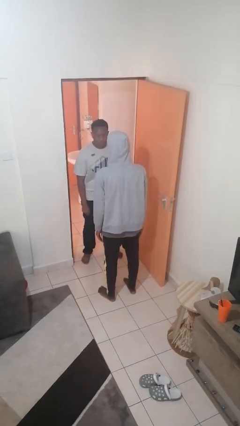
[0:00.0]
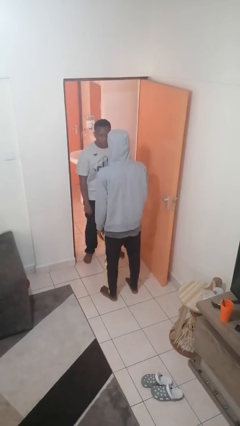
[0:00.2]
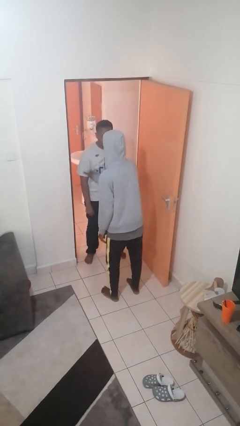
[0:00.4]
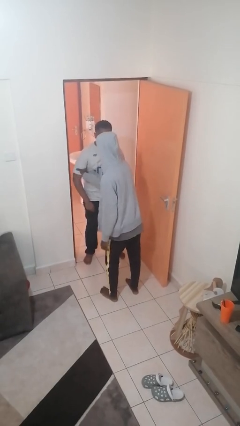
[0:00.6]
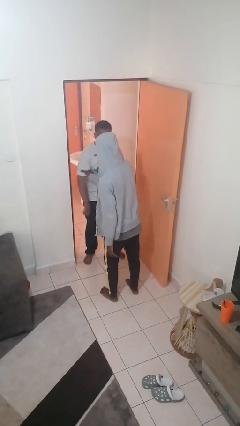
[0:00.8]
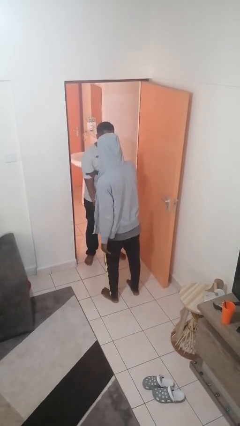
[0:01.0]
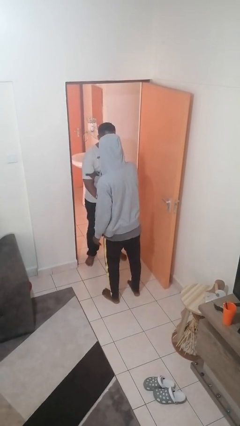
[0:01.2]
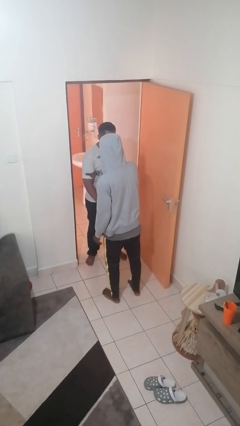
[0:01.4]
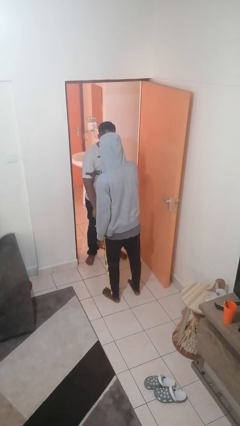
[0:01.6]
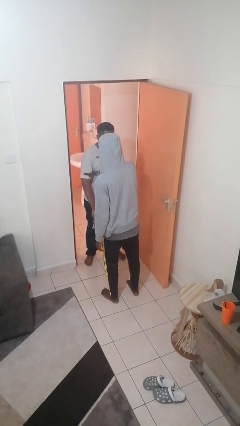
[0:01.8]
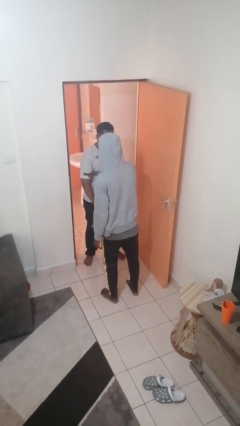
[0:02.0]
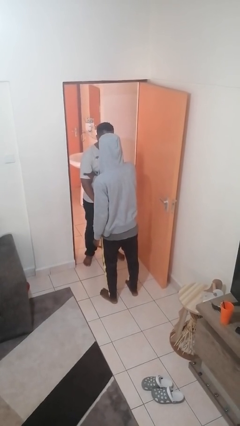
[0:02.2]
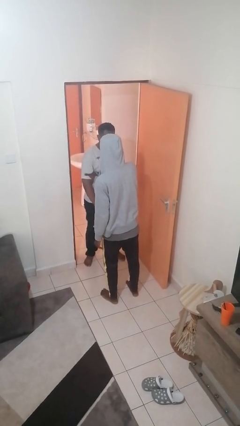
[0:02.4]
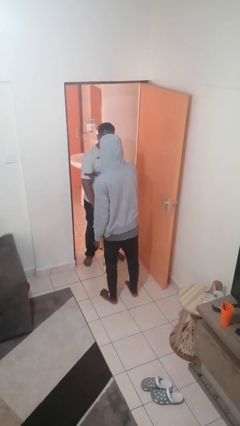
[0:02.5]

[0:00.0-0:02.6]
person grabs person by bicep

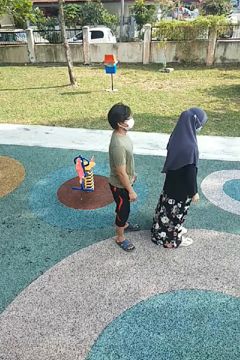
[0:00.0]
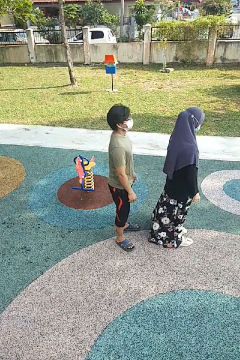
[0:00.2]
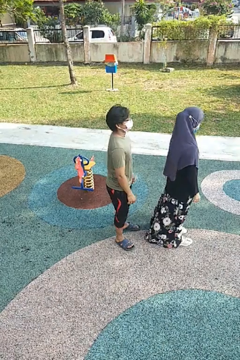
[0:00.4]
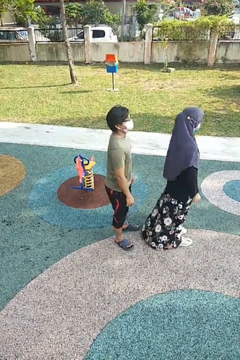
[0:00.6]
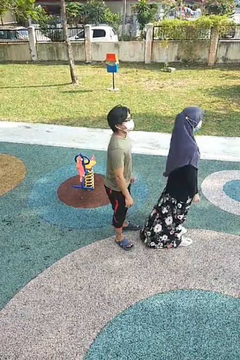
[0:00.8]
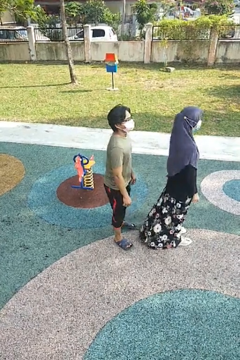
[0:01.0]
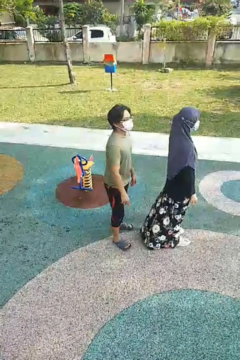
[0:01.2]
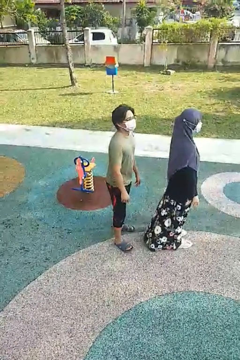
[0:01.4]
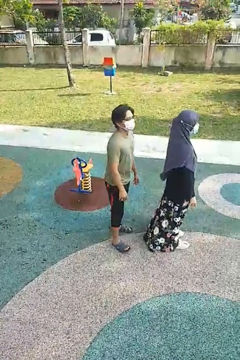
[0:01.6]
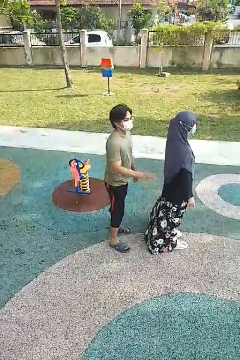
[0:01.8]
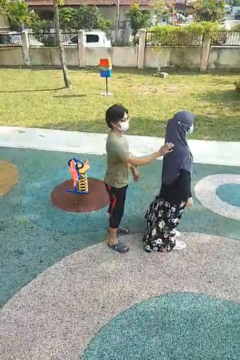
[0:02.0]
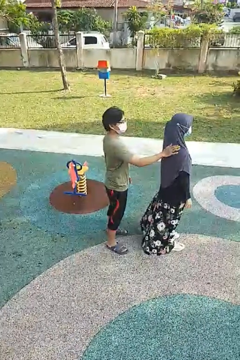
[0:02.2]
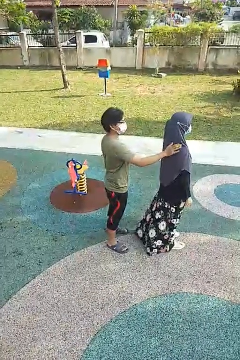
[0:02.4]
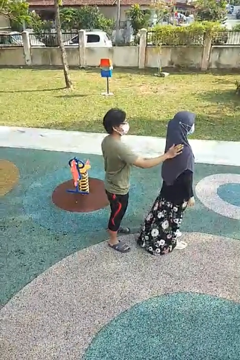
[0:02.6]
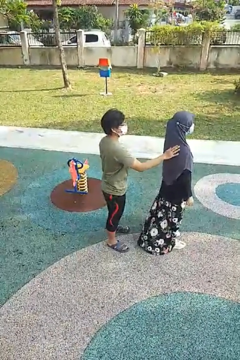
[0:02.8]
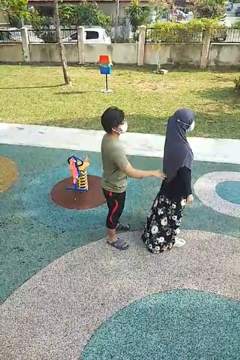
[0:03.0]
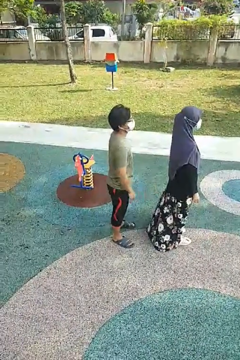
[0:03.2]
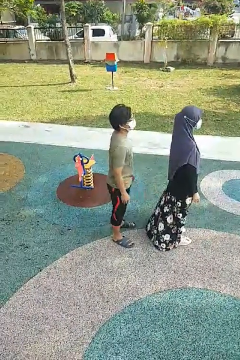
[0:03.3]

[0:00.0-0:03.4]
person touches back of person

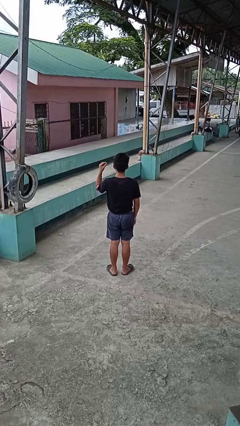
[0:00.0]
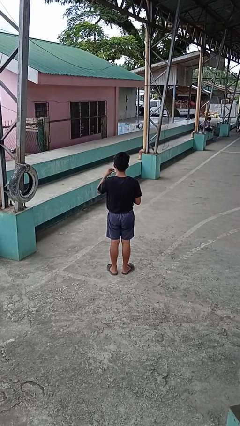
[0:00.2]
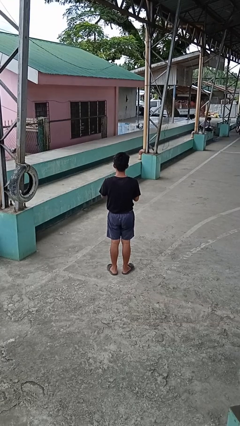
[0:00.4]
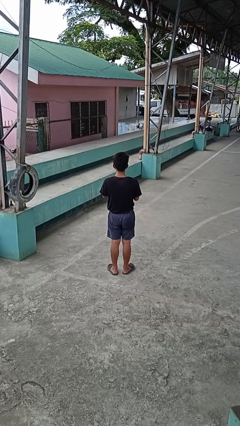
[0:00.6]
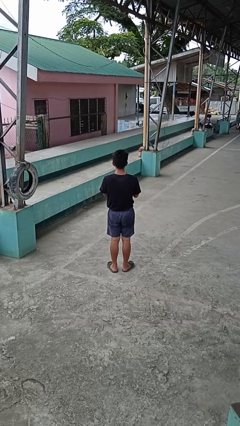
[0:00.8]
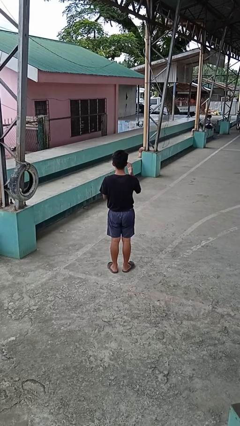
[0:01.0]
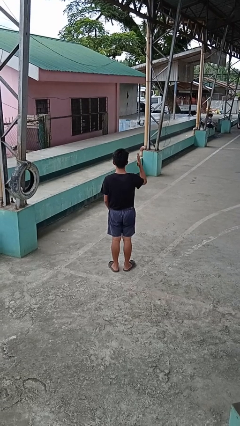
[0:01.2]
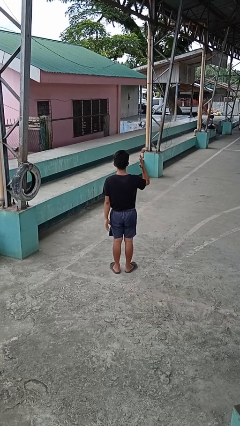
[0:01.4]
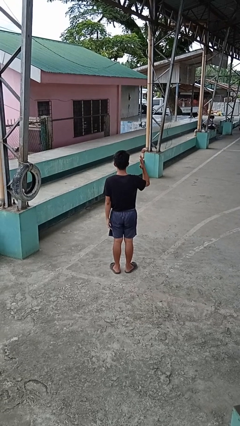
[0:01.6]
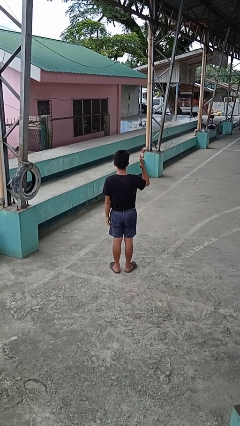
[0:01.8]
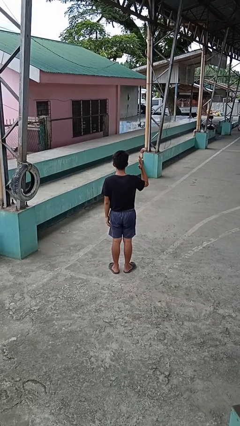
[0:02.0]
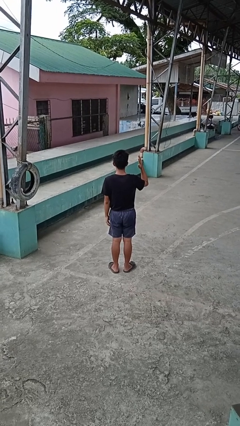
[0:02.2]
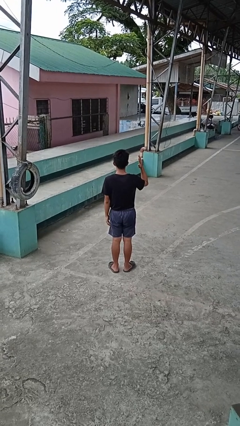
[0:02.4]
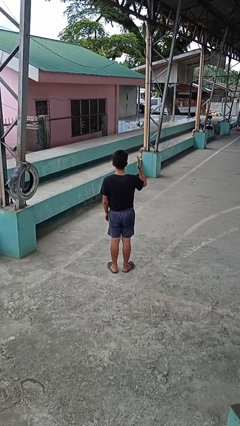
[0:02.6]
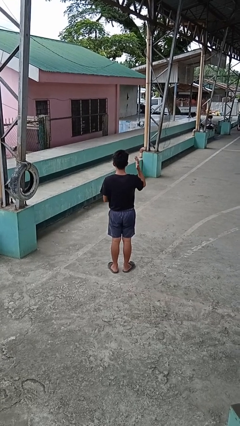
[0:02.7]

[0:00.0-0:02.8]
person puts on ring

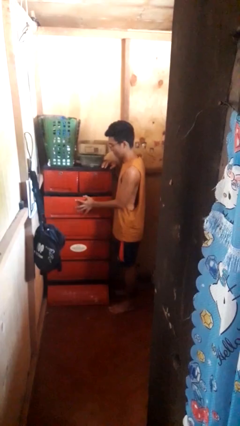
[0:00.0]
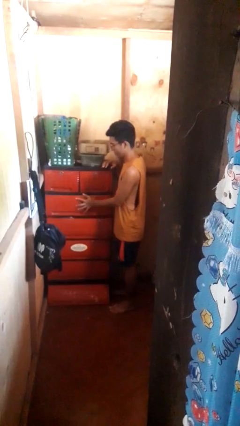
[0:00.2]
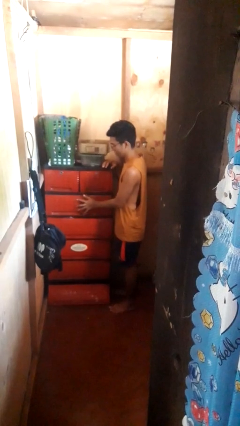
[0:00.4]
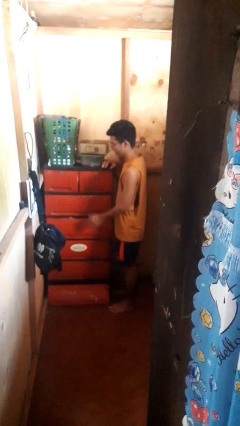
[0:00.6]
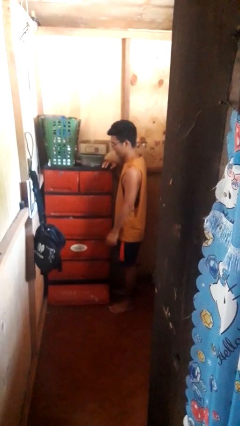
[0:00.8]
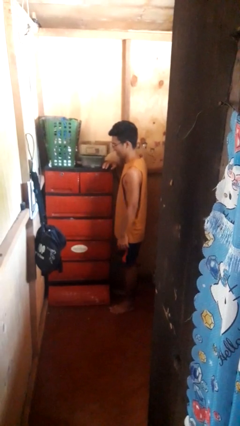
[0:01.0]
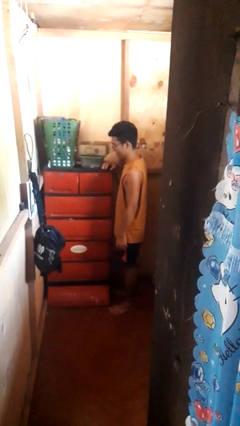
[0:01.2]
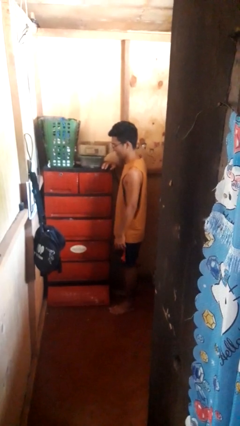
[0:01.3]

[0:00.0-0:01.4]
person closes dresser drawer

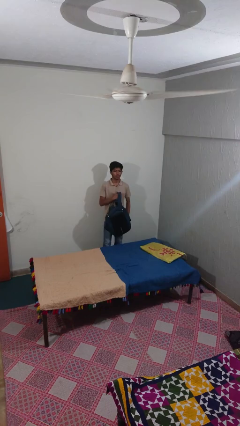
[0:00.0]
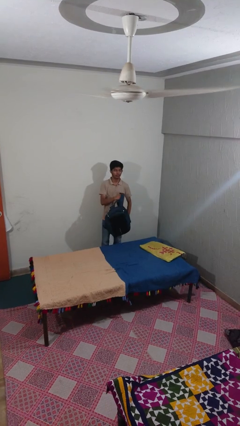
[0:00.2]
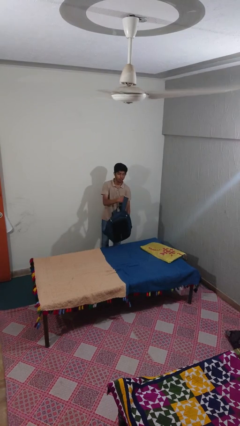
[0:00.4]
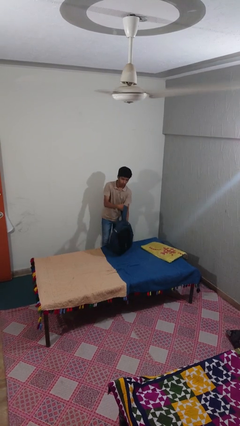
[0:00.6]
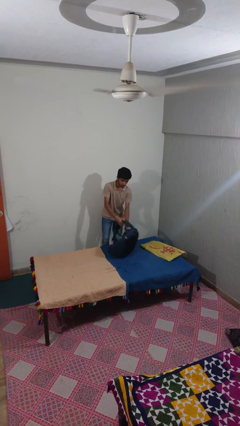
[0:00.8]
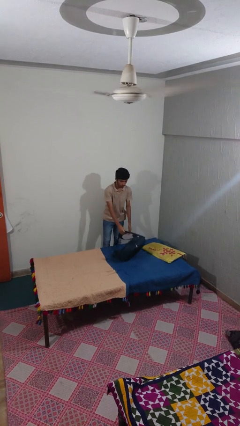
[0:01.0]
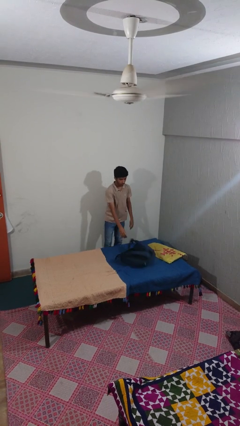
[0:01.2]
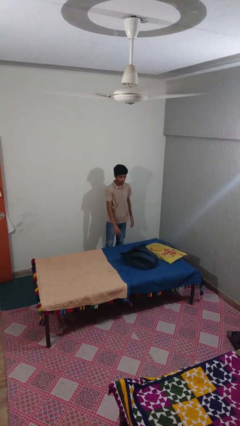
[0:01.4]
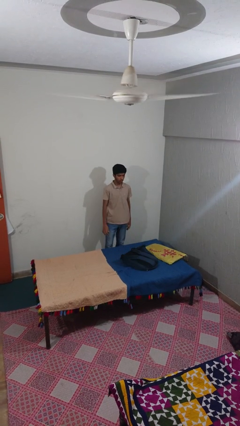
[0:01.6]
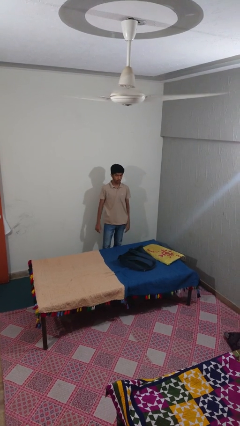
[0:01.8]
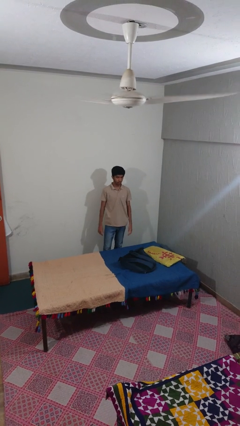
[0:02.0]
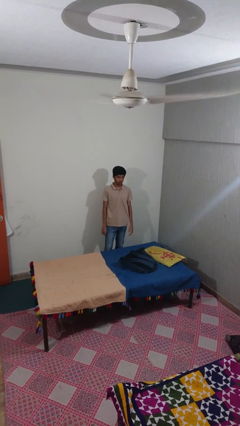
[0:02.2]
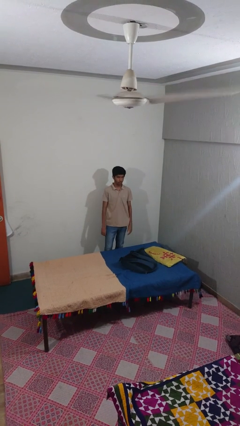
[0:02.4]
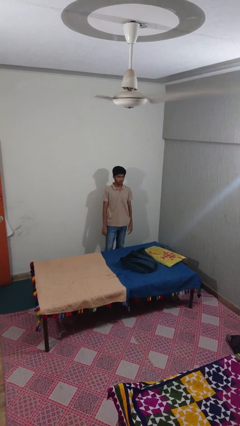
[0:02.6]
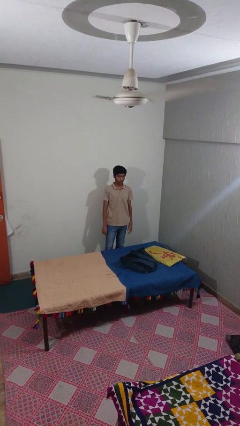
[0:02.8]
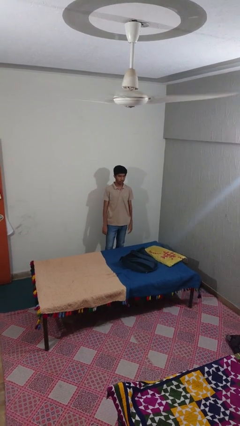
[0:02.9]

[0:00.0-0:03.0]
person puts down object on bed

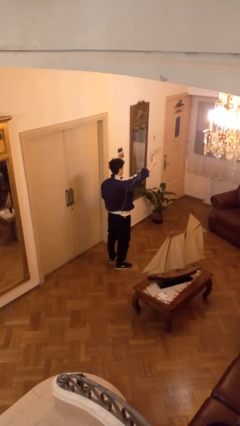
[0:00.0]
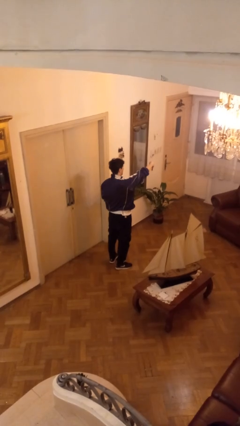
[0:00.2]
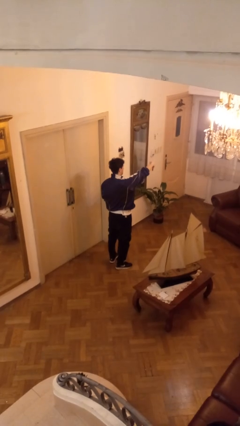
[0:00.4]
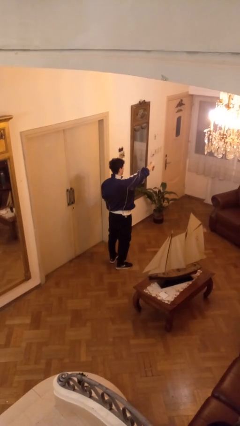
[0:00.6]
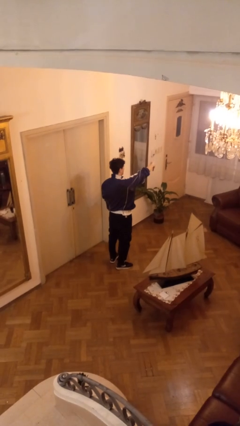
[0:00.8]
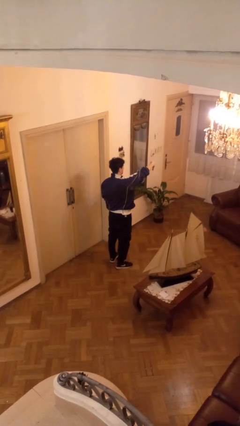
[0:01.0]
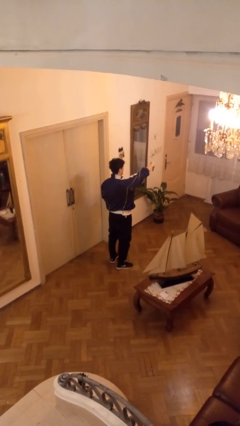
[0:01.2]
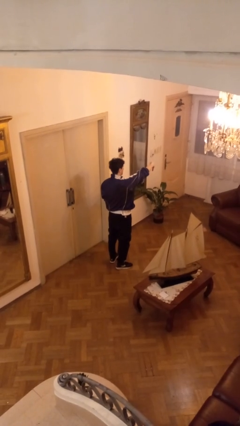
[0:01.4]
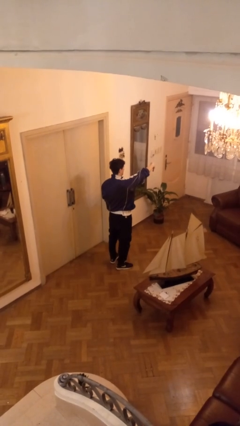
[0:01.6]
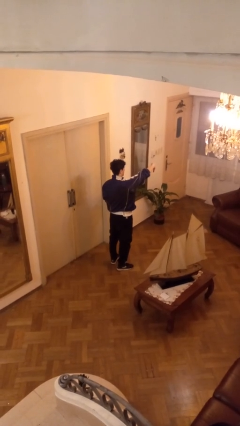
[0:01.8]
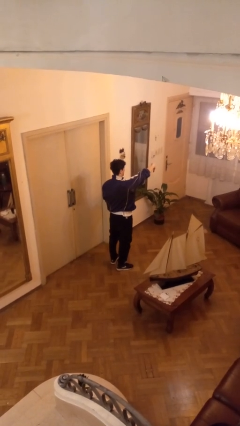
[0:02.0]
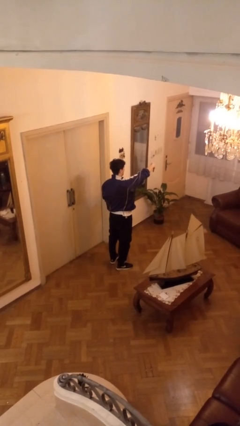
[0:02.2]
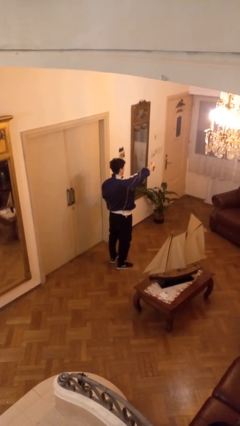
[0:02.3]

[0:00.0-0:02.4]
person gestures thumbs down

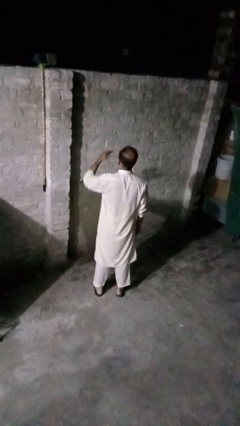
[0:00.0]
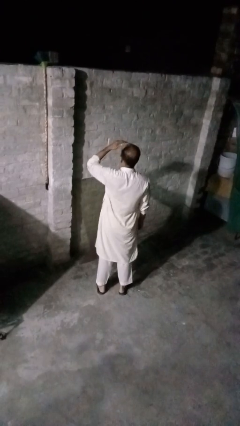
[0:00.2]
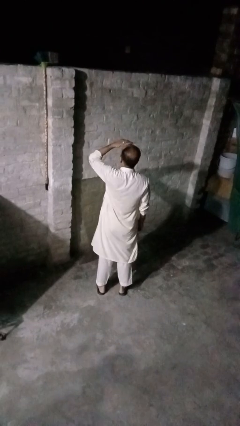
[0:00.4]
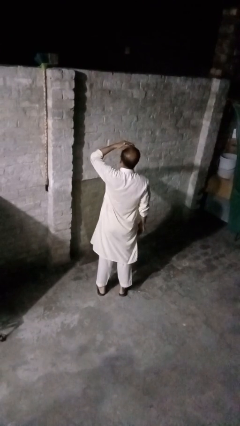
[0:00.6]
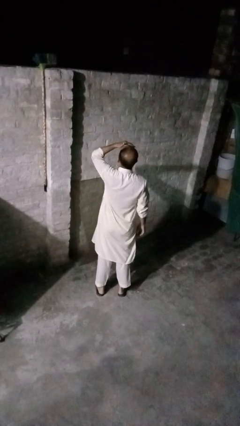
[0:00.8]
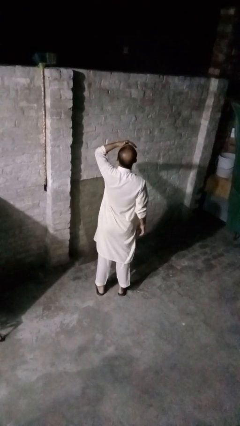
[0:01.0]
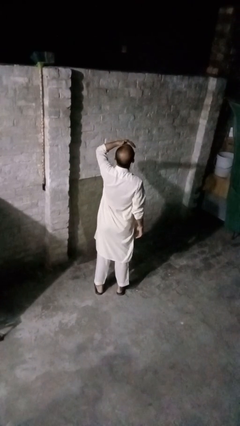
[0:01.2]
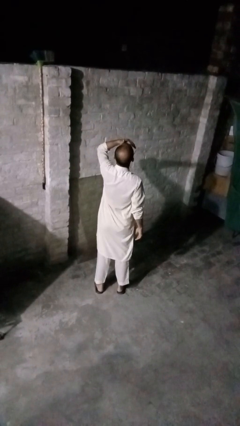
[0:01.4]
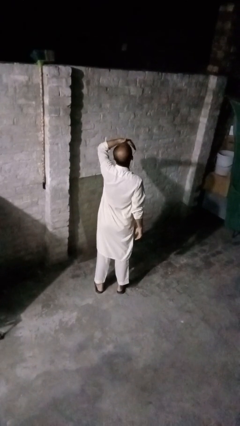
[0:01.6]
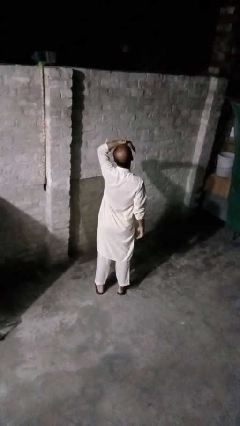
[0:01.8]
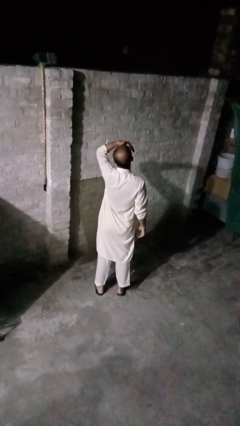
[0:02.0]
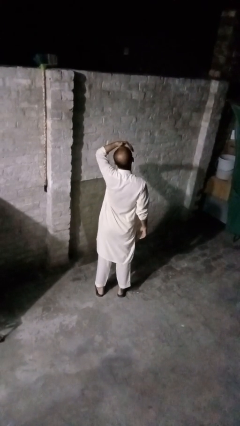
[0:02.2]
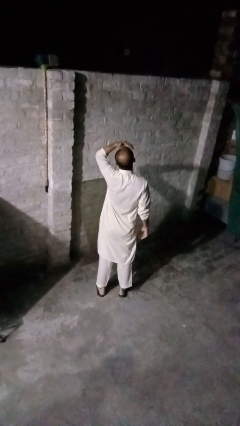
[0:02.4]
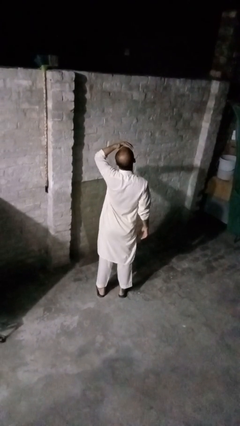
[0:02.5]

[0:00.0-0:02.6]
person shades eyes
